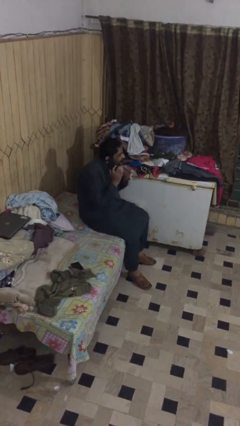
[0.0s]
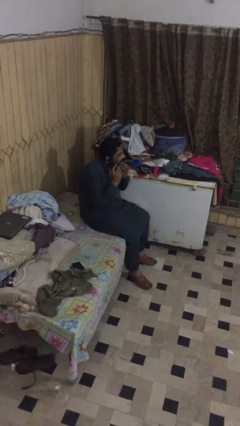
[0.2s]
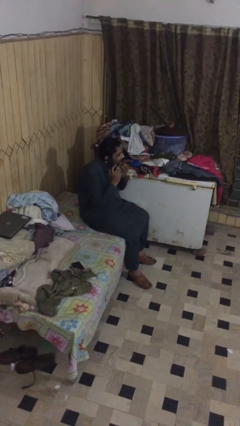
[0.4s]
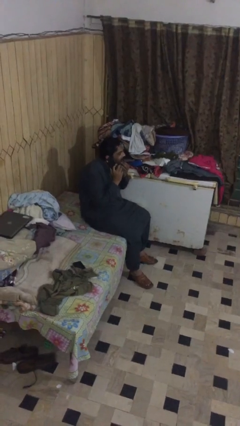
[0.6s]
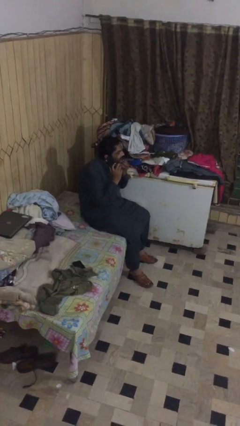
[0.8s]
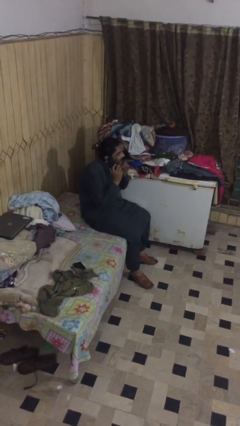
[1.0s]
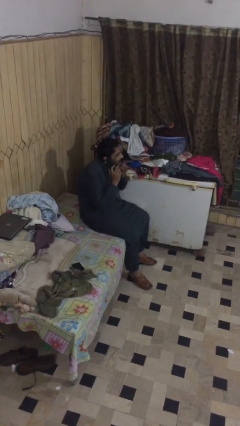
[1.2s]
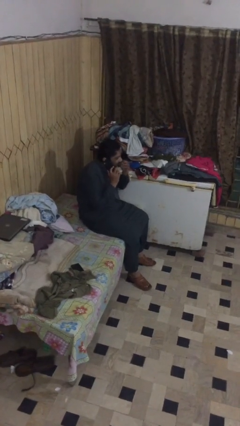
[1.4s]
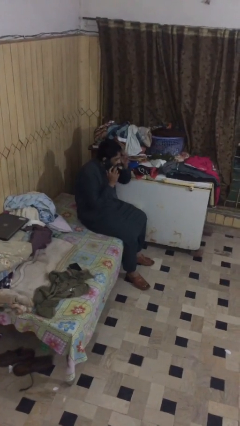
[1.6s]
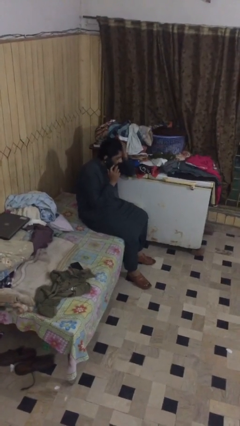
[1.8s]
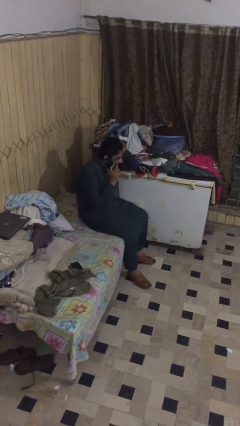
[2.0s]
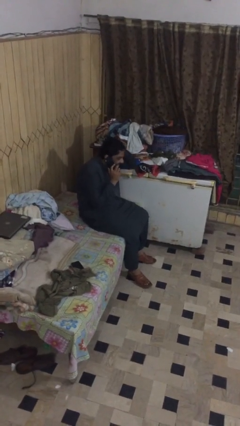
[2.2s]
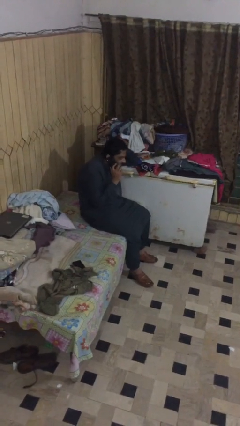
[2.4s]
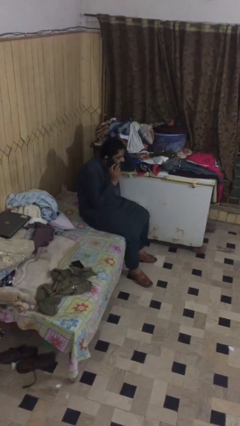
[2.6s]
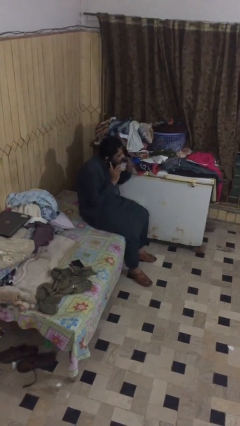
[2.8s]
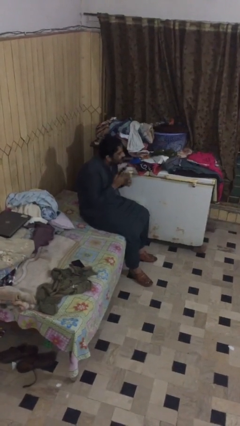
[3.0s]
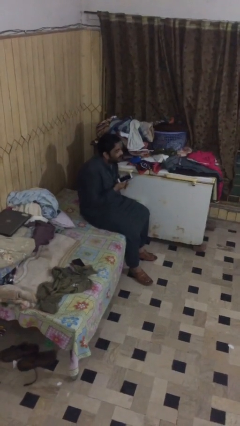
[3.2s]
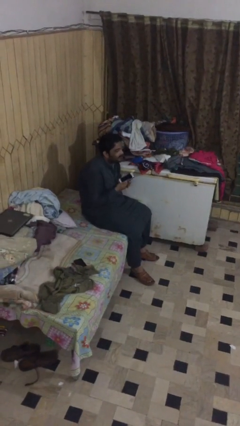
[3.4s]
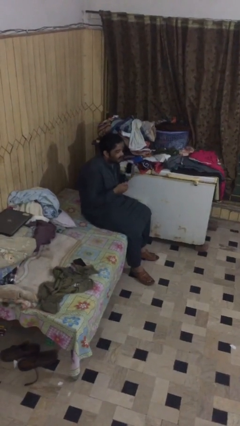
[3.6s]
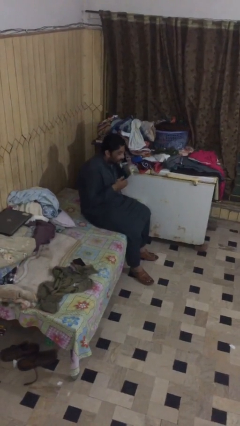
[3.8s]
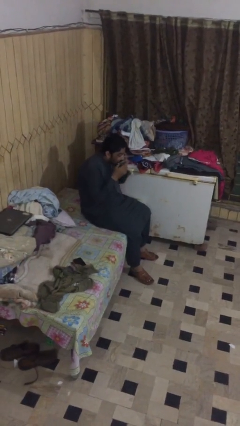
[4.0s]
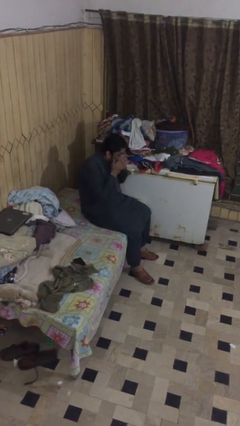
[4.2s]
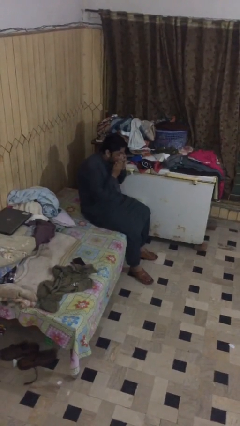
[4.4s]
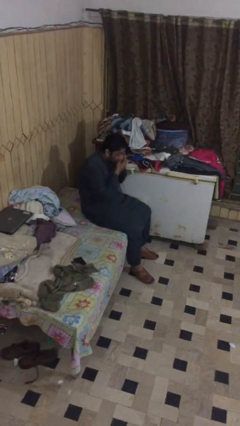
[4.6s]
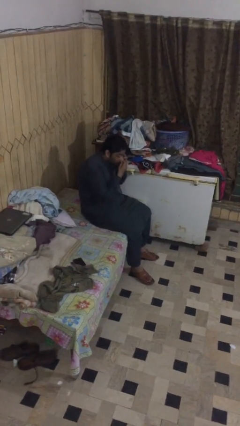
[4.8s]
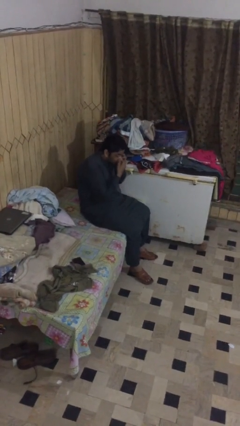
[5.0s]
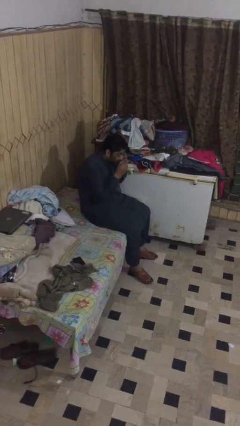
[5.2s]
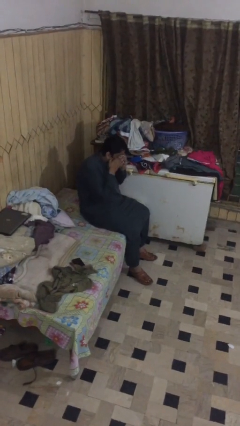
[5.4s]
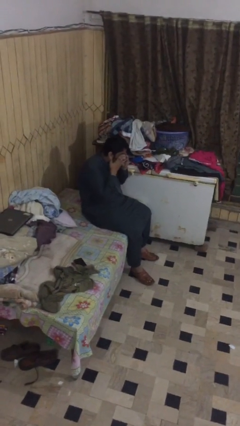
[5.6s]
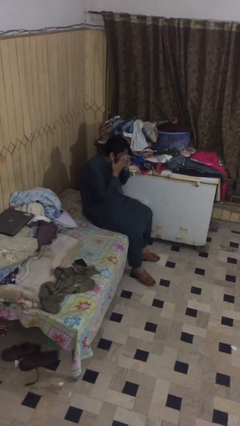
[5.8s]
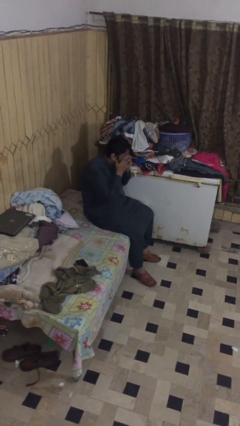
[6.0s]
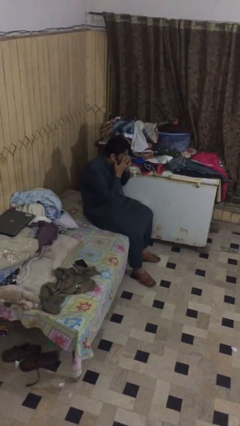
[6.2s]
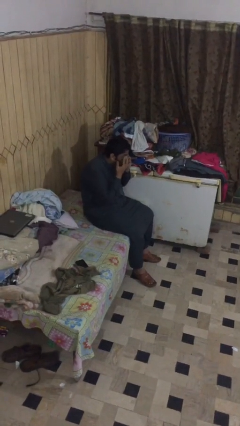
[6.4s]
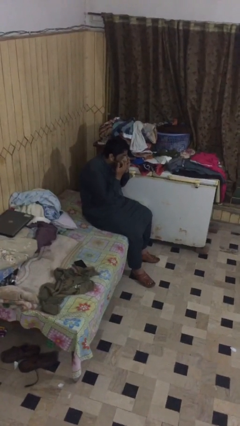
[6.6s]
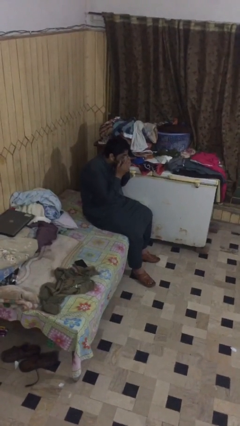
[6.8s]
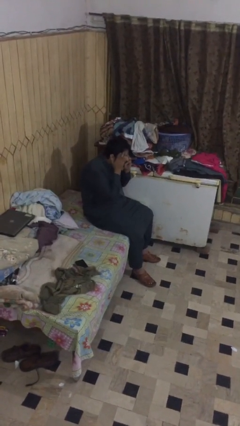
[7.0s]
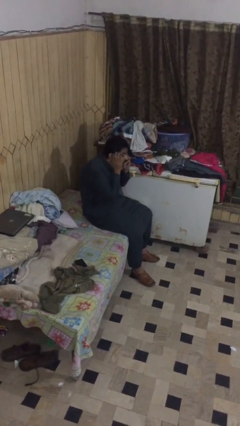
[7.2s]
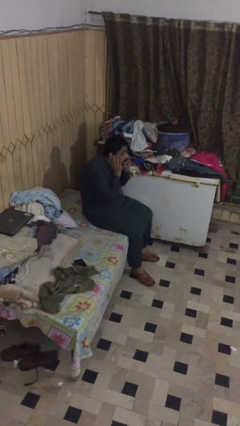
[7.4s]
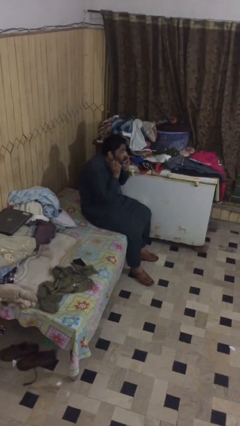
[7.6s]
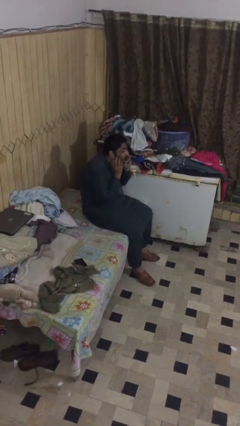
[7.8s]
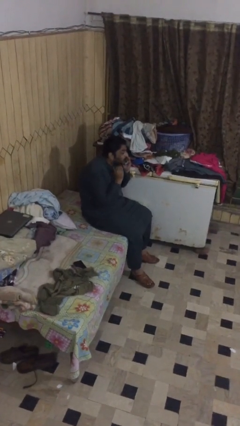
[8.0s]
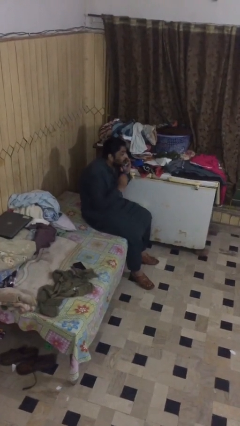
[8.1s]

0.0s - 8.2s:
person talks on phone

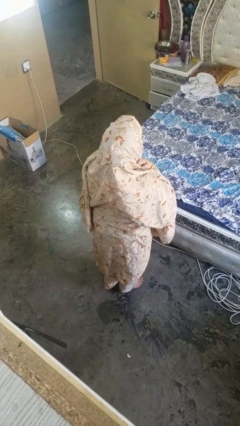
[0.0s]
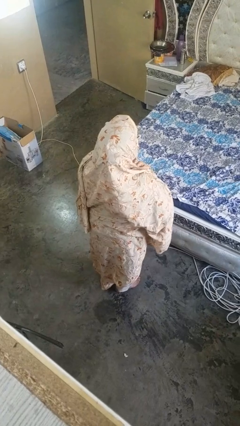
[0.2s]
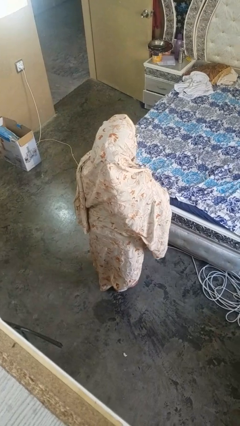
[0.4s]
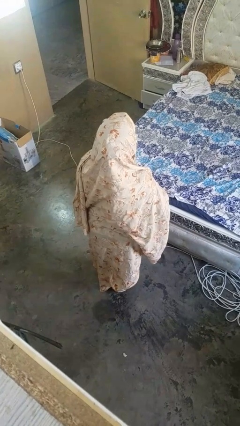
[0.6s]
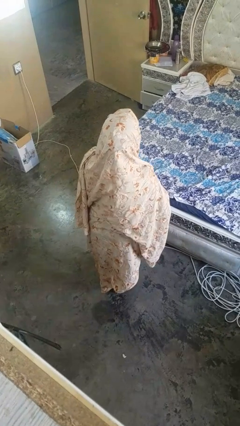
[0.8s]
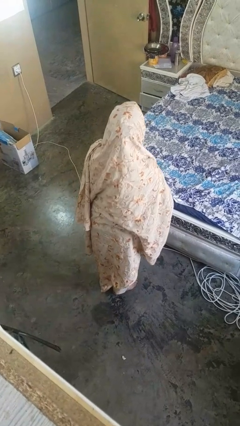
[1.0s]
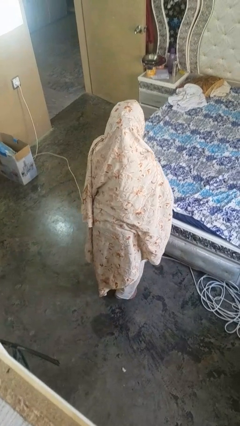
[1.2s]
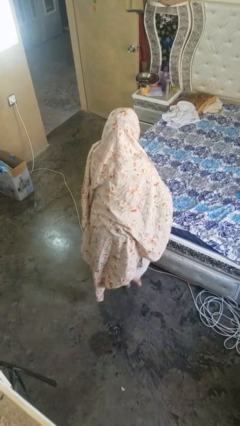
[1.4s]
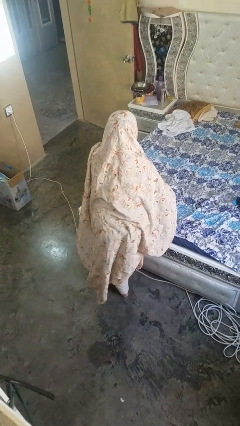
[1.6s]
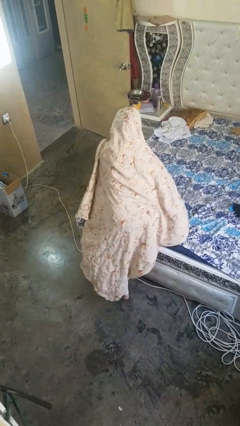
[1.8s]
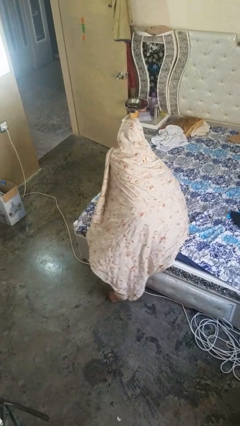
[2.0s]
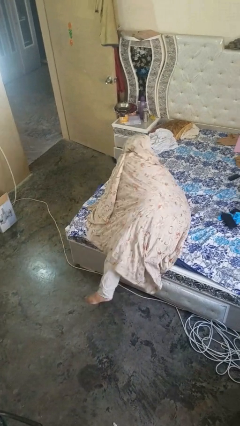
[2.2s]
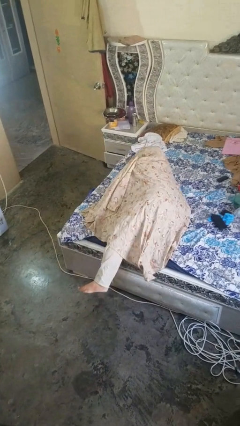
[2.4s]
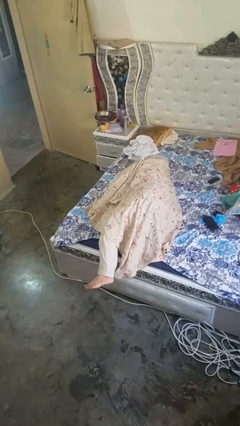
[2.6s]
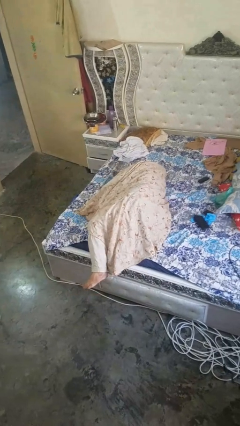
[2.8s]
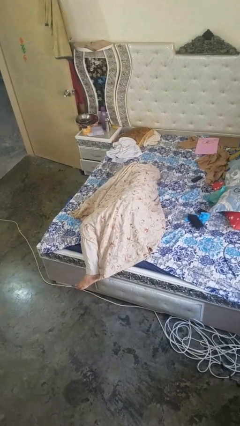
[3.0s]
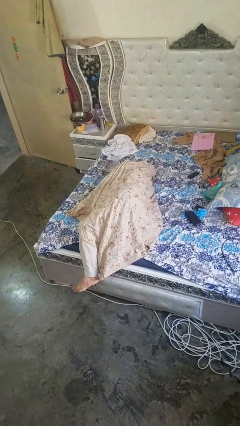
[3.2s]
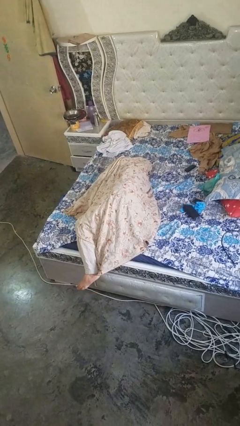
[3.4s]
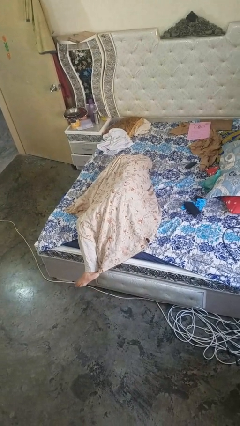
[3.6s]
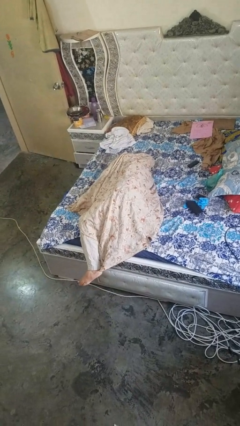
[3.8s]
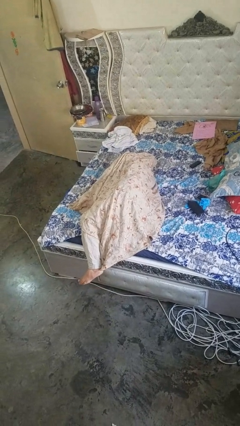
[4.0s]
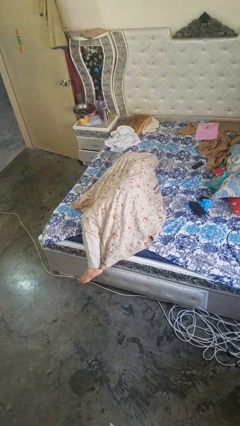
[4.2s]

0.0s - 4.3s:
person lies down on bed

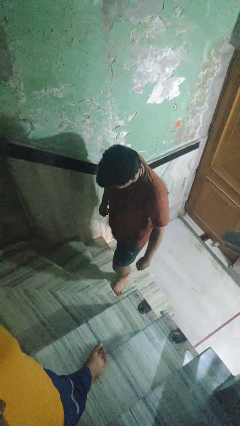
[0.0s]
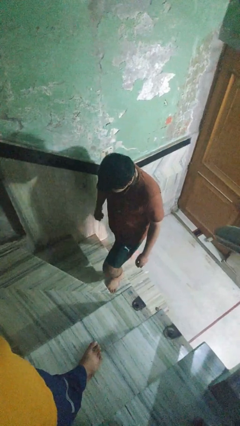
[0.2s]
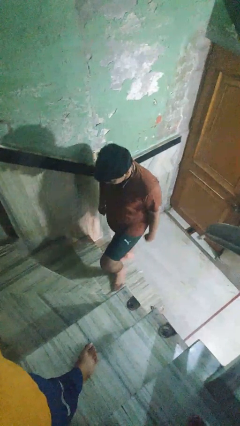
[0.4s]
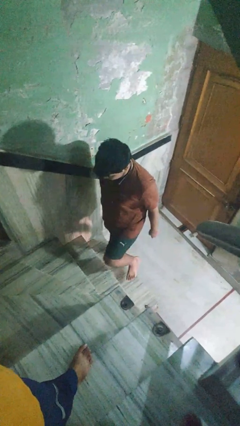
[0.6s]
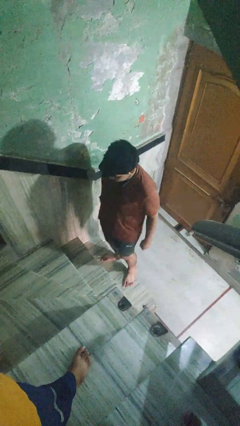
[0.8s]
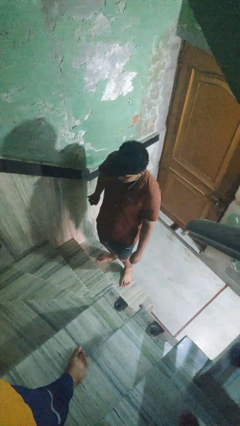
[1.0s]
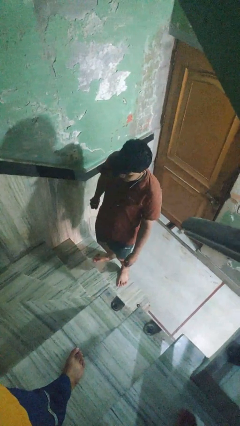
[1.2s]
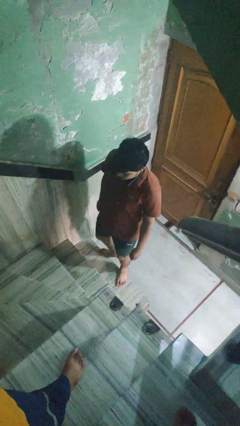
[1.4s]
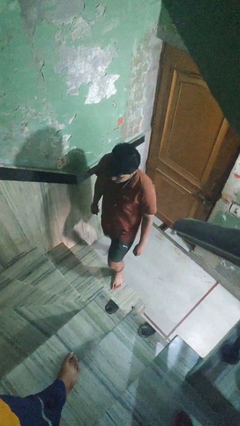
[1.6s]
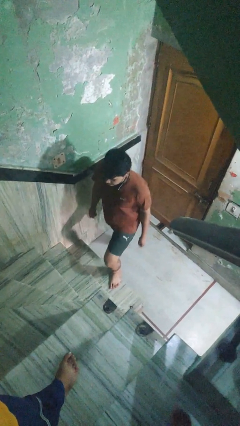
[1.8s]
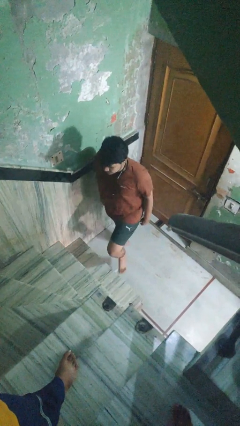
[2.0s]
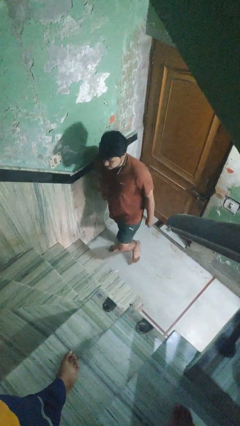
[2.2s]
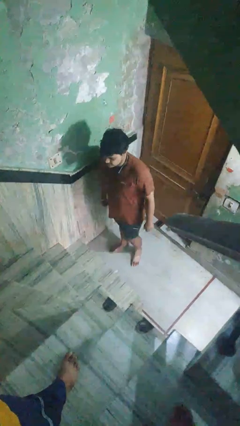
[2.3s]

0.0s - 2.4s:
person climbs down stairs

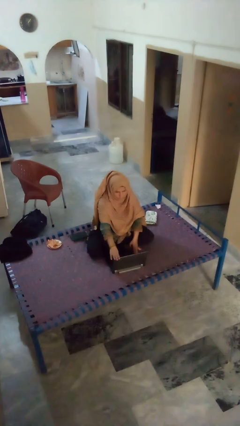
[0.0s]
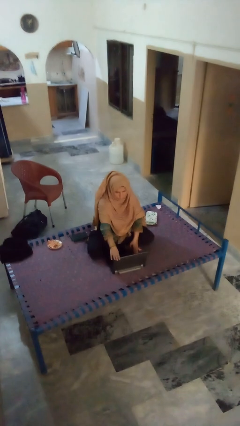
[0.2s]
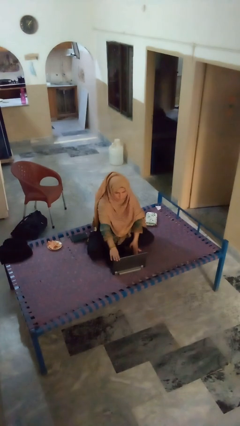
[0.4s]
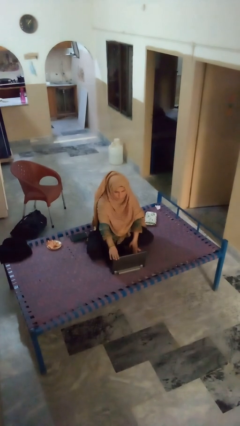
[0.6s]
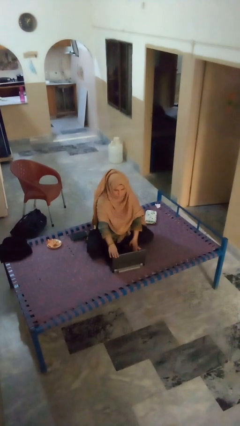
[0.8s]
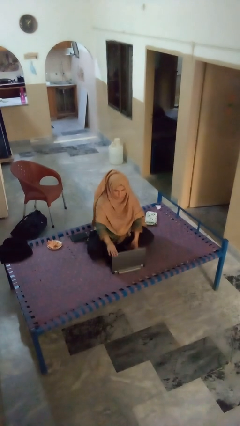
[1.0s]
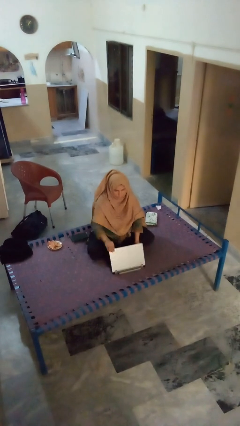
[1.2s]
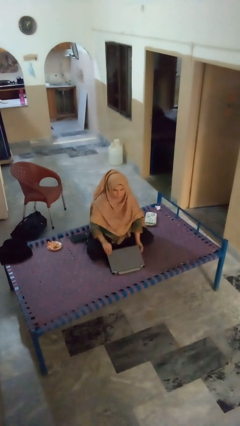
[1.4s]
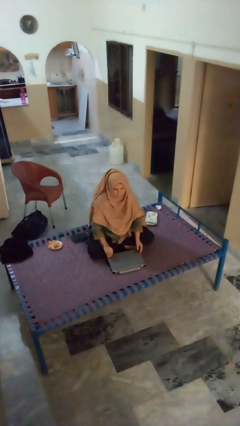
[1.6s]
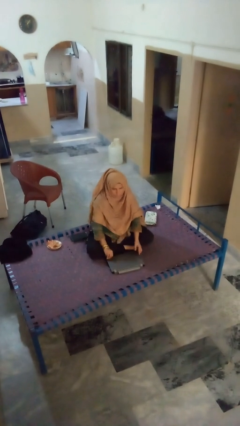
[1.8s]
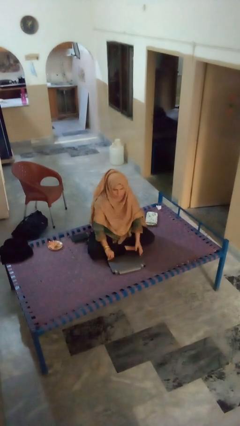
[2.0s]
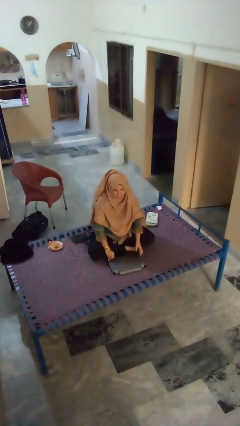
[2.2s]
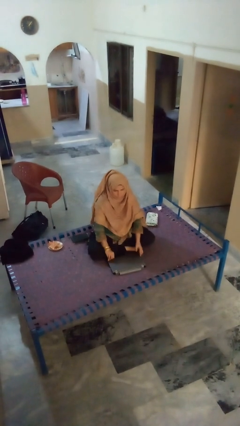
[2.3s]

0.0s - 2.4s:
person closes laptop

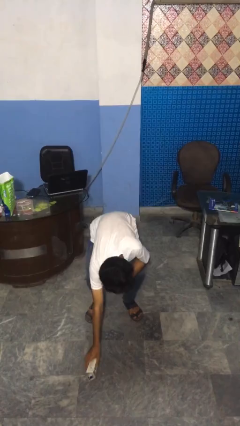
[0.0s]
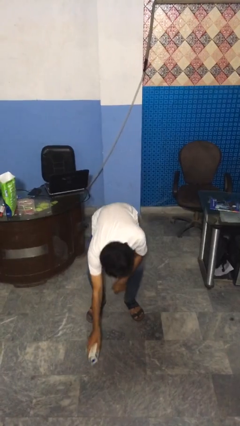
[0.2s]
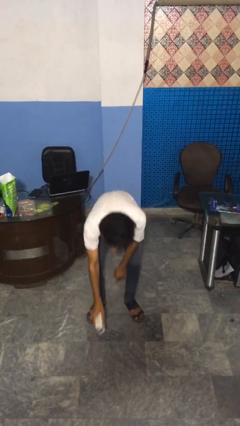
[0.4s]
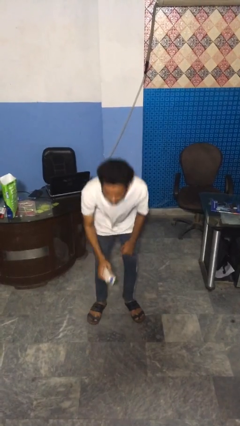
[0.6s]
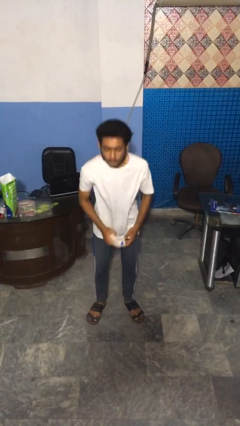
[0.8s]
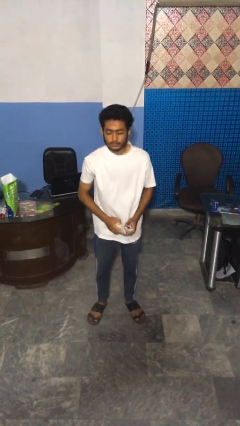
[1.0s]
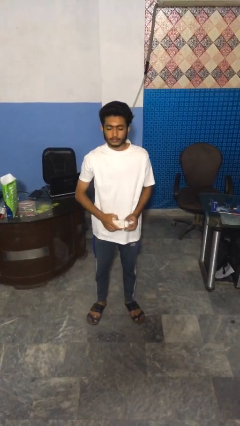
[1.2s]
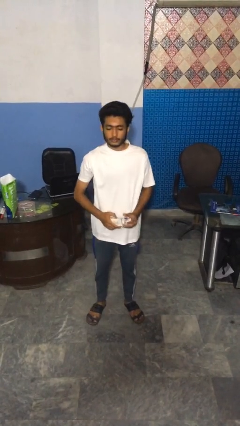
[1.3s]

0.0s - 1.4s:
person picks up object from floor
